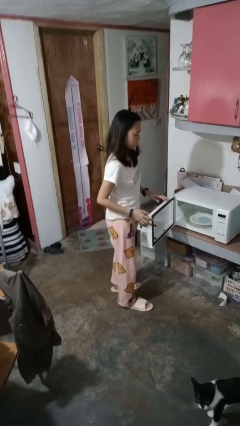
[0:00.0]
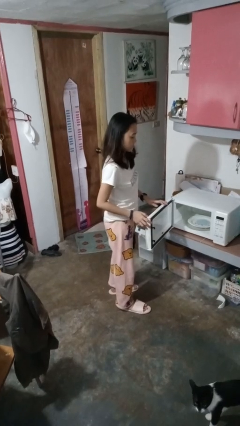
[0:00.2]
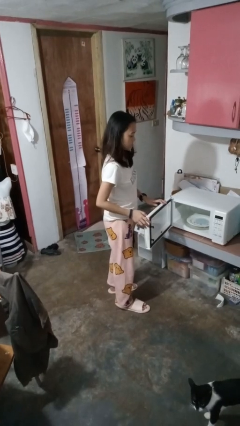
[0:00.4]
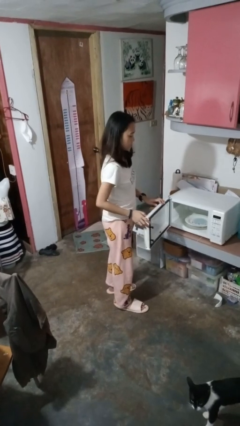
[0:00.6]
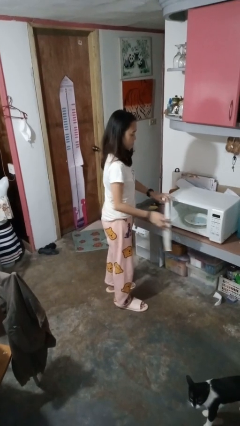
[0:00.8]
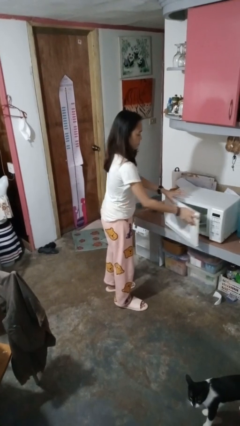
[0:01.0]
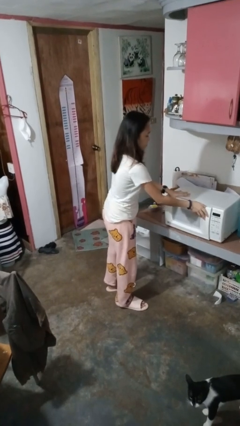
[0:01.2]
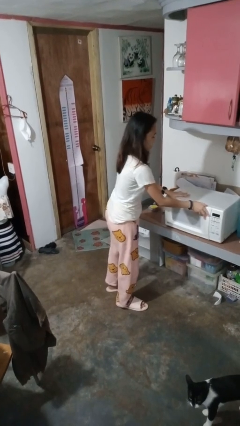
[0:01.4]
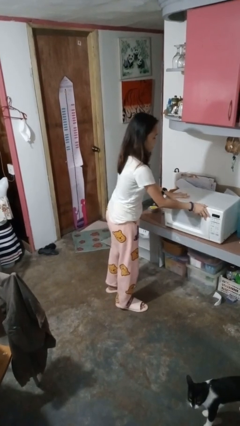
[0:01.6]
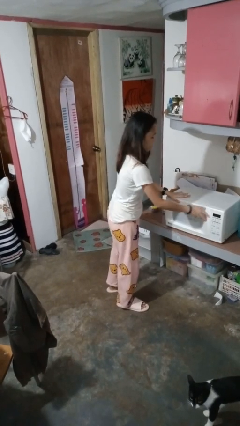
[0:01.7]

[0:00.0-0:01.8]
person closes microwave

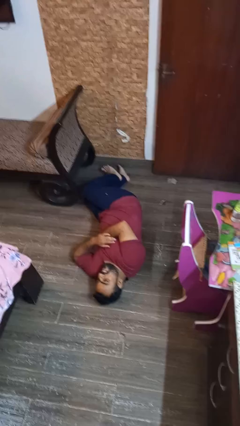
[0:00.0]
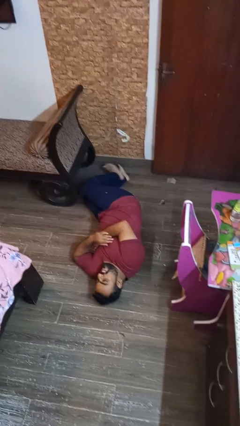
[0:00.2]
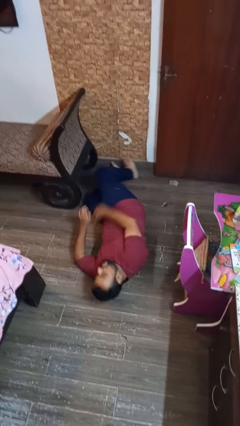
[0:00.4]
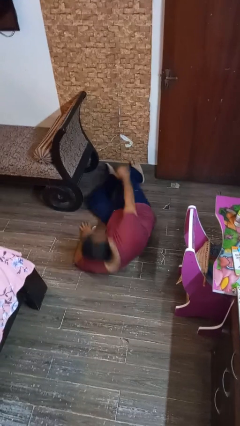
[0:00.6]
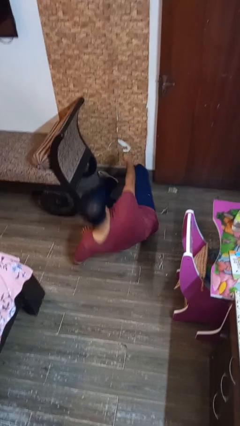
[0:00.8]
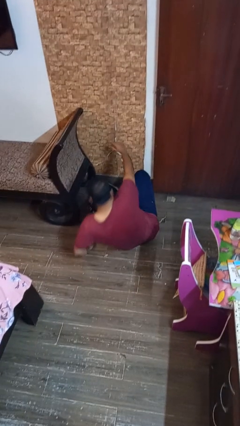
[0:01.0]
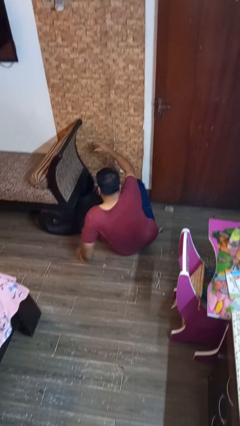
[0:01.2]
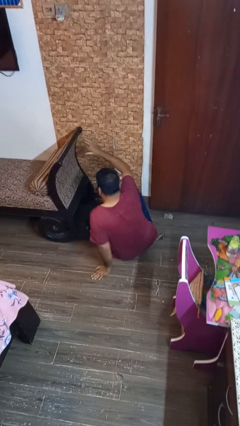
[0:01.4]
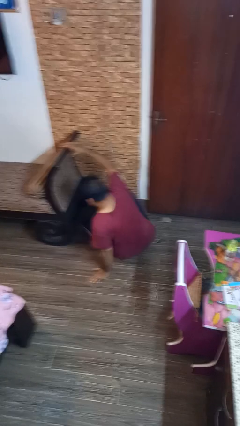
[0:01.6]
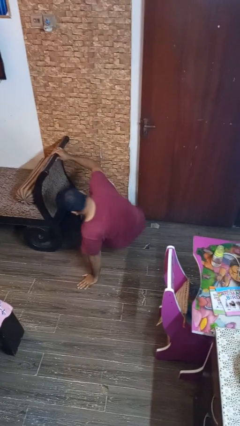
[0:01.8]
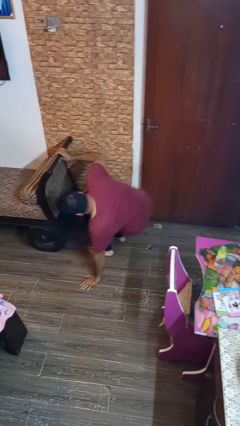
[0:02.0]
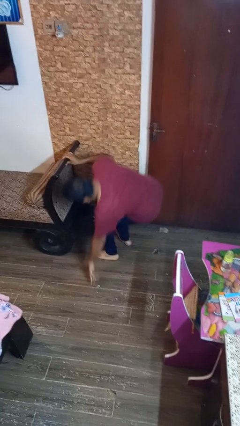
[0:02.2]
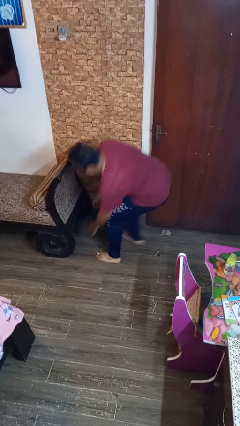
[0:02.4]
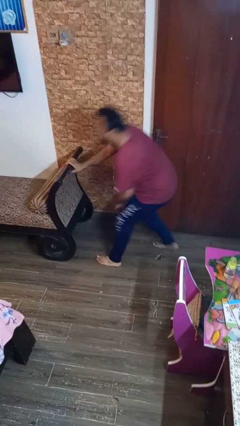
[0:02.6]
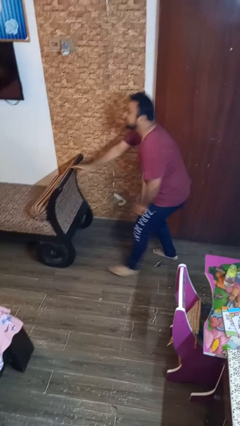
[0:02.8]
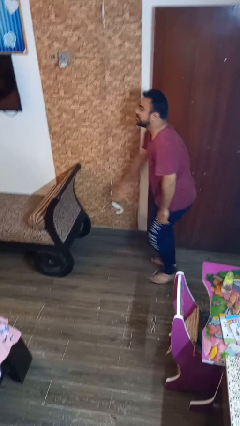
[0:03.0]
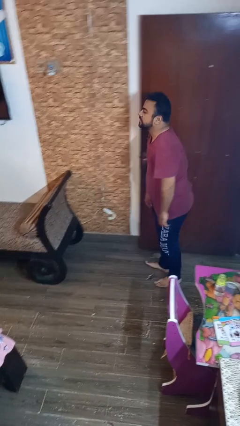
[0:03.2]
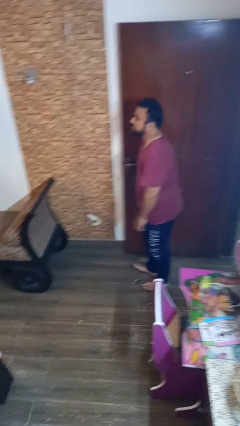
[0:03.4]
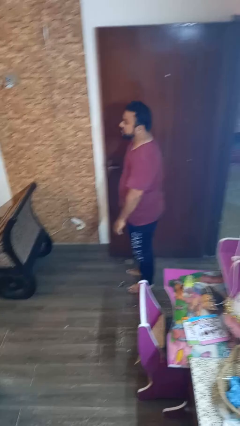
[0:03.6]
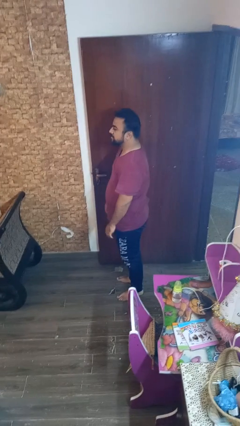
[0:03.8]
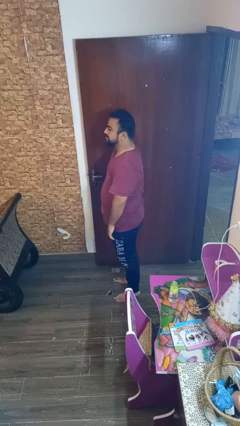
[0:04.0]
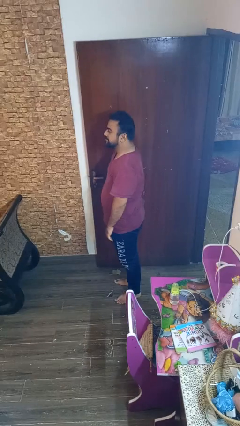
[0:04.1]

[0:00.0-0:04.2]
person stands up from floor

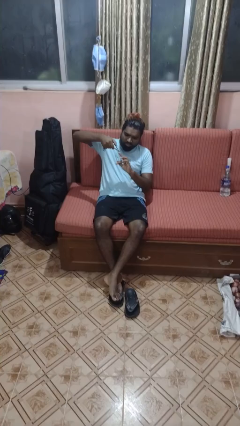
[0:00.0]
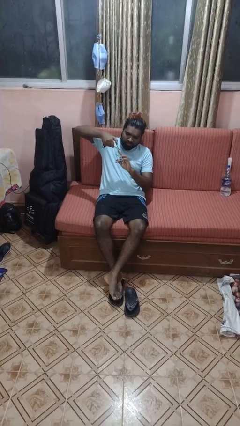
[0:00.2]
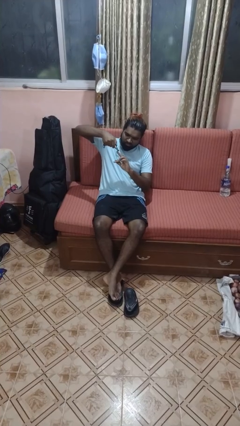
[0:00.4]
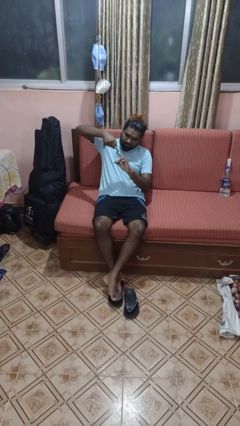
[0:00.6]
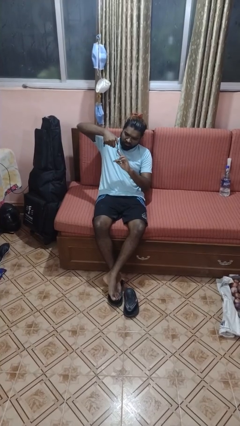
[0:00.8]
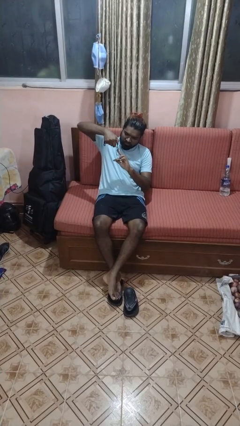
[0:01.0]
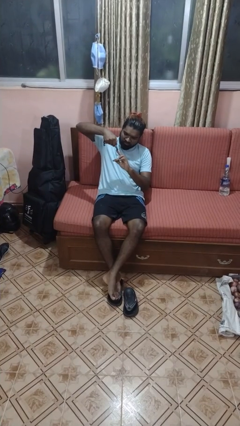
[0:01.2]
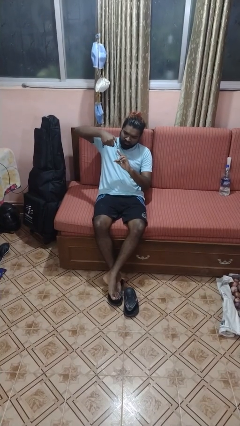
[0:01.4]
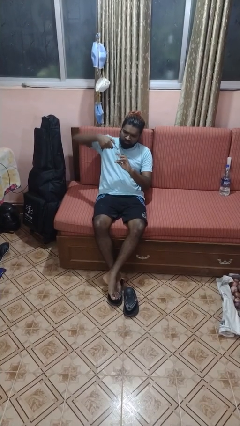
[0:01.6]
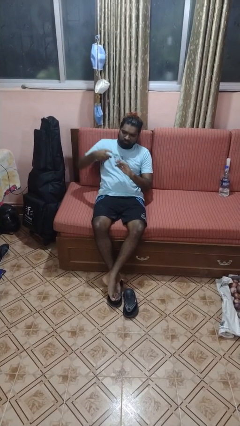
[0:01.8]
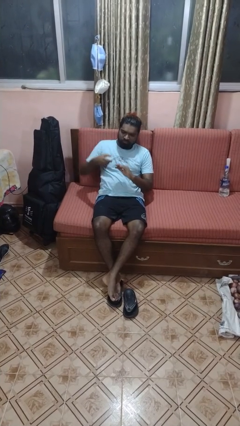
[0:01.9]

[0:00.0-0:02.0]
person clips fingernails

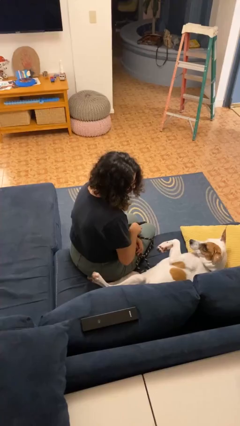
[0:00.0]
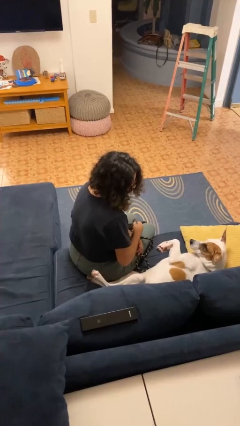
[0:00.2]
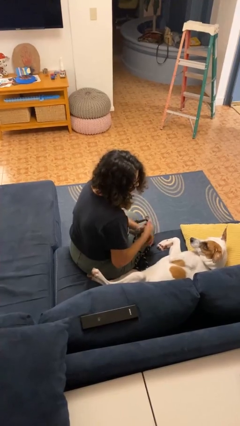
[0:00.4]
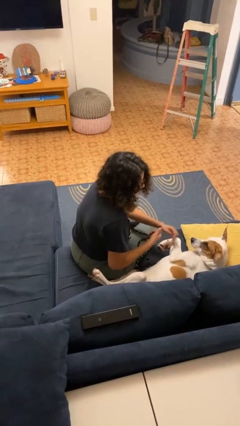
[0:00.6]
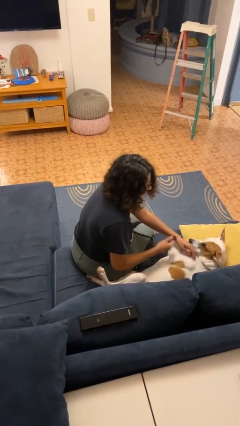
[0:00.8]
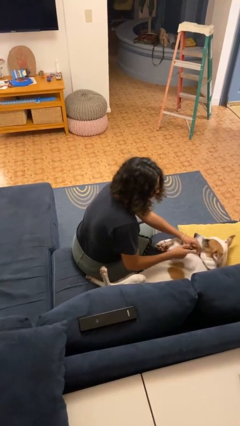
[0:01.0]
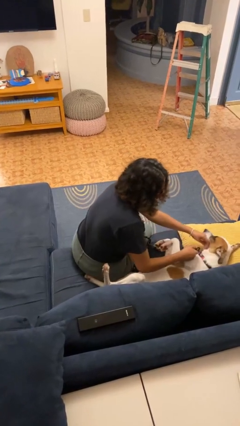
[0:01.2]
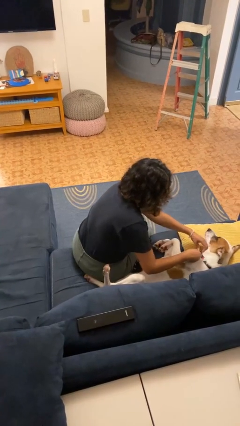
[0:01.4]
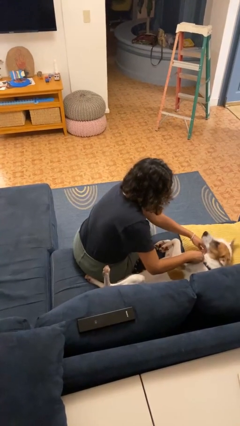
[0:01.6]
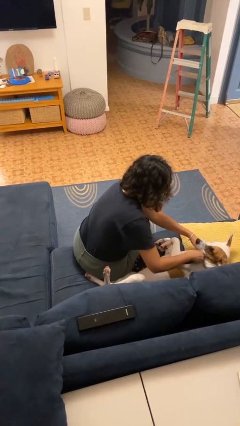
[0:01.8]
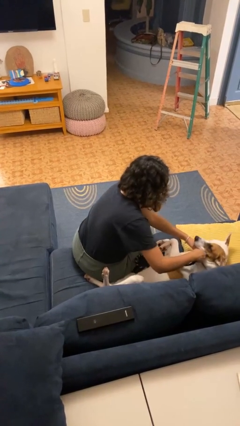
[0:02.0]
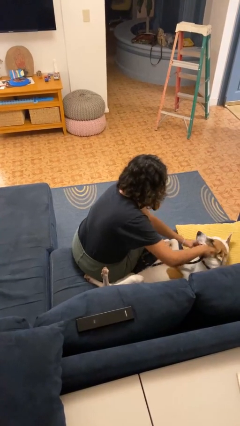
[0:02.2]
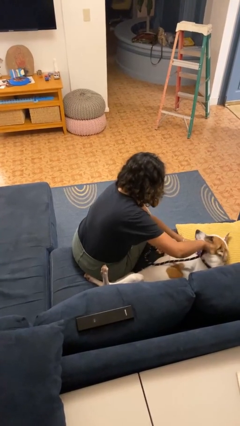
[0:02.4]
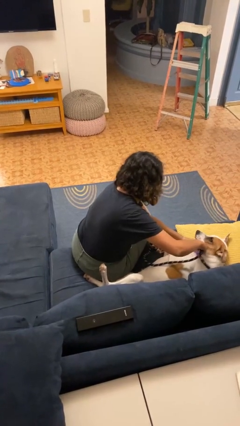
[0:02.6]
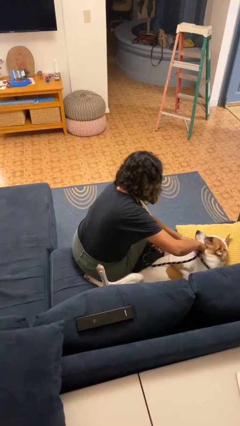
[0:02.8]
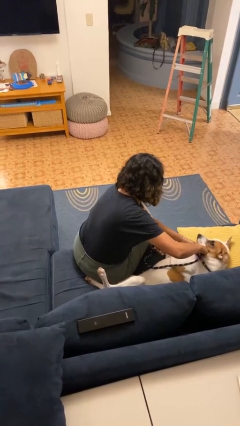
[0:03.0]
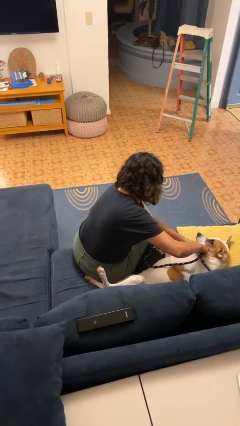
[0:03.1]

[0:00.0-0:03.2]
person attaches leash to dog

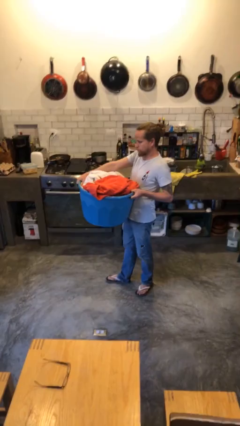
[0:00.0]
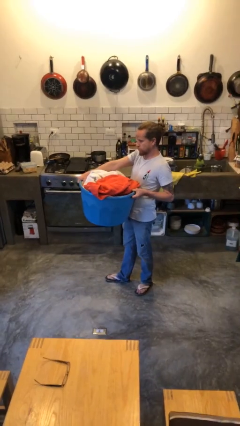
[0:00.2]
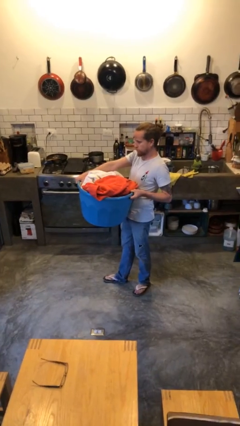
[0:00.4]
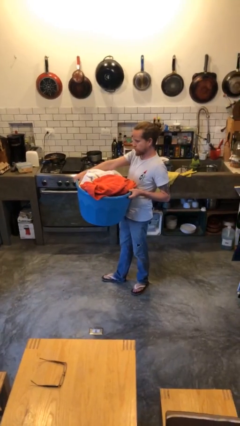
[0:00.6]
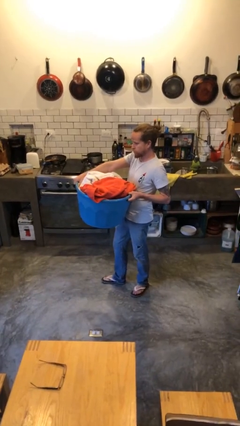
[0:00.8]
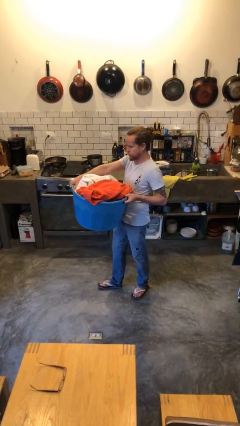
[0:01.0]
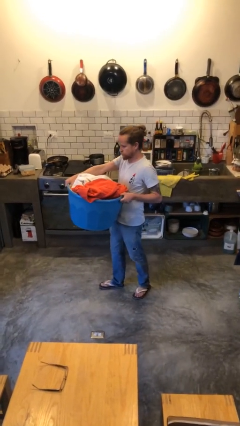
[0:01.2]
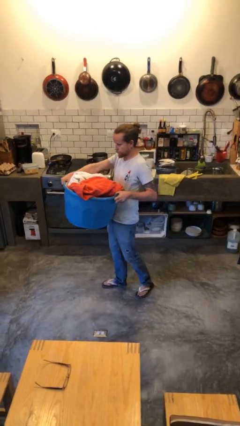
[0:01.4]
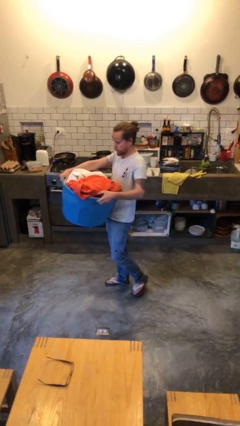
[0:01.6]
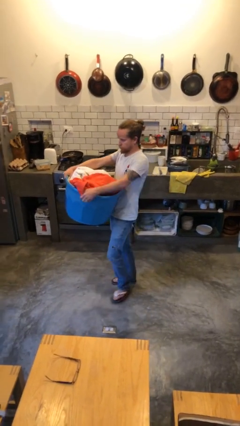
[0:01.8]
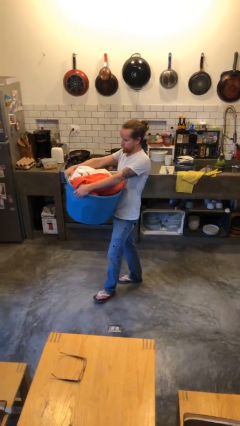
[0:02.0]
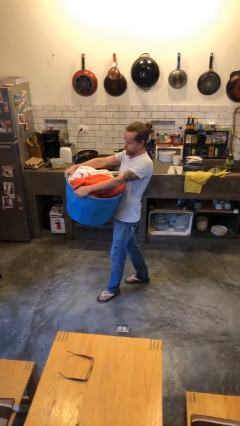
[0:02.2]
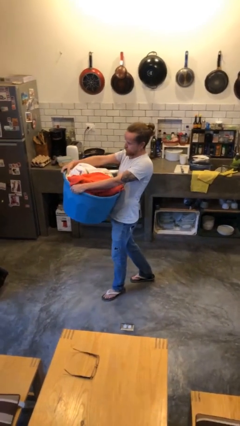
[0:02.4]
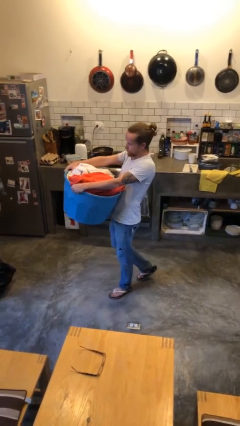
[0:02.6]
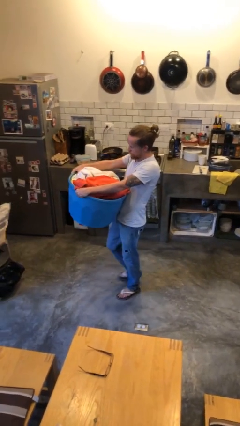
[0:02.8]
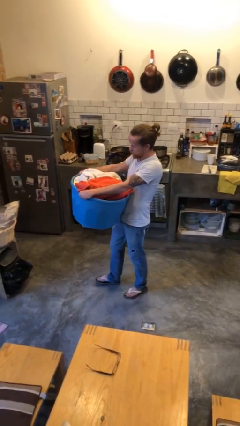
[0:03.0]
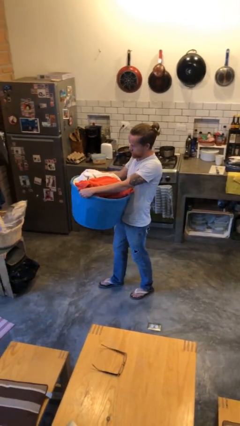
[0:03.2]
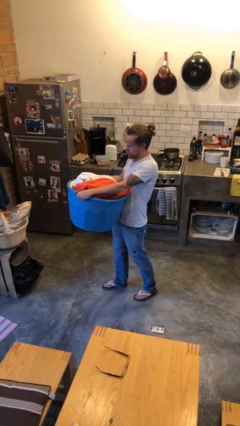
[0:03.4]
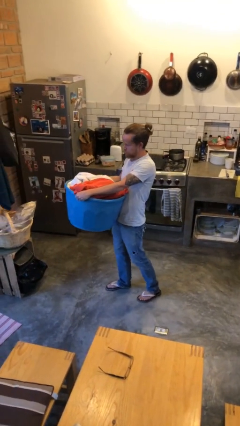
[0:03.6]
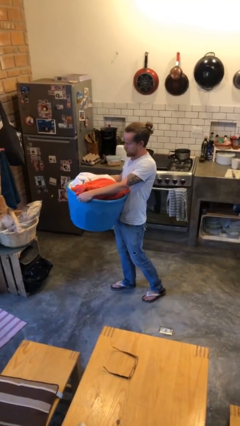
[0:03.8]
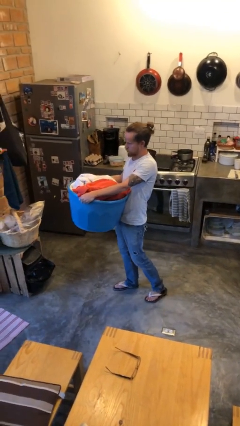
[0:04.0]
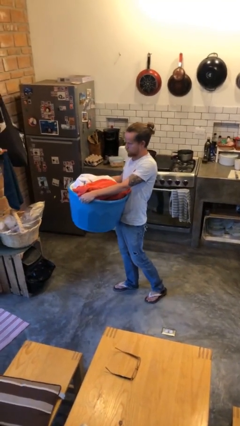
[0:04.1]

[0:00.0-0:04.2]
person carries laundry basket

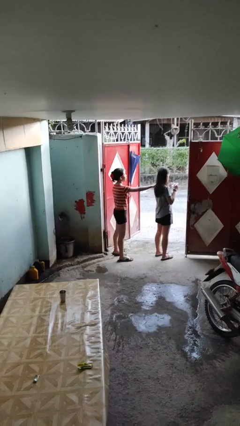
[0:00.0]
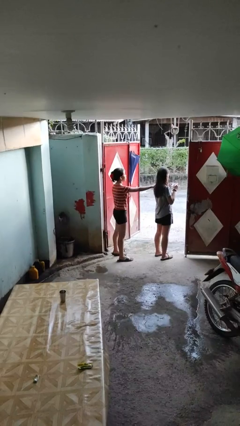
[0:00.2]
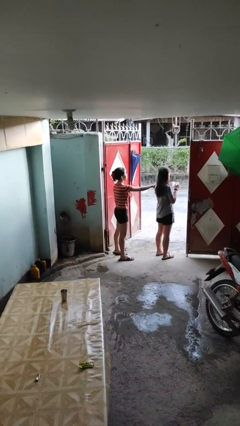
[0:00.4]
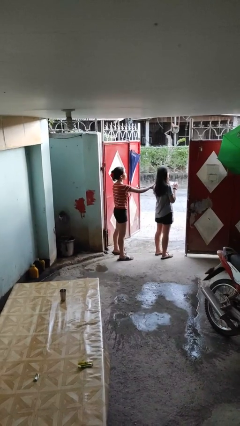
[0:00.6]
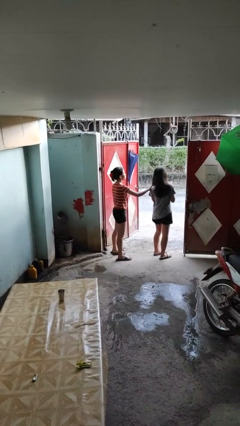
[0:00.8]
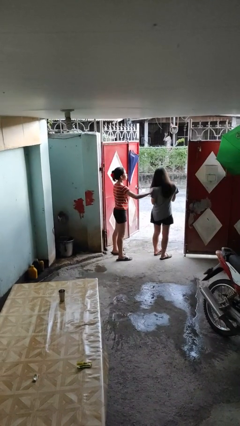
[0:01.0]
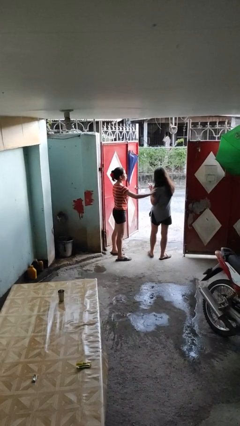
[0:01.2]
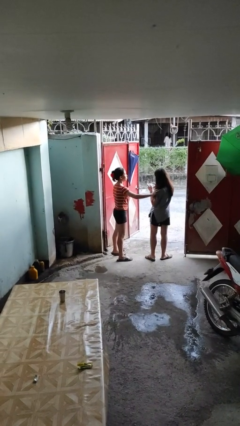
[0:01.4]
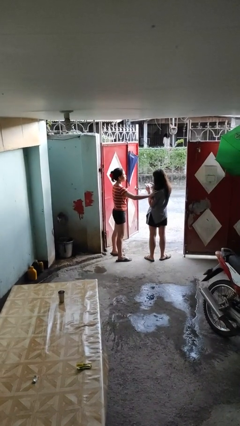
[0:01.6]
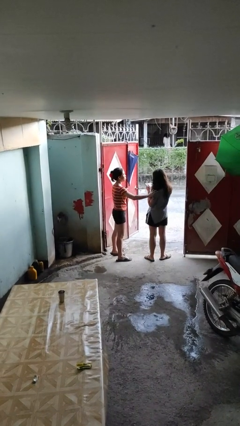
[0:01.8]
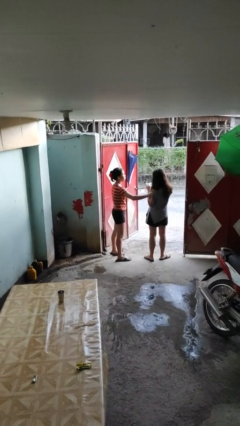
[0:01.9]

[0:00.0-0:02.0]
person spins person around

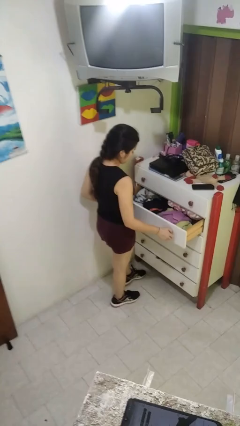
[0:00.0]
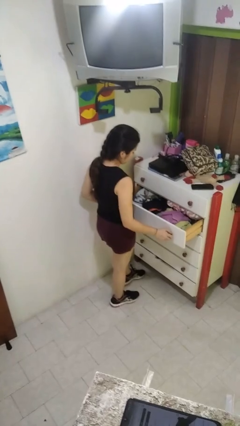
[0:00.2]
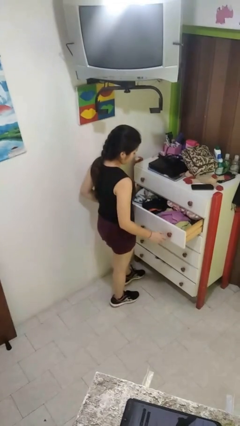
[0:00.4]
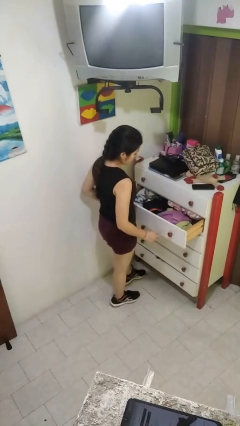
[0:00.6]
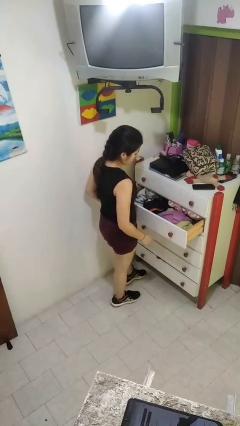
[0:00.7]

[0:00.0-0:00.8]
person opens dresser drawer
